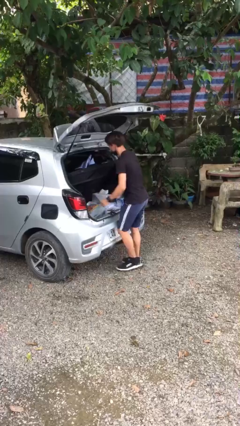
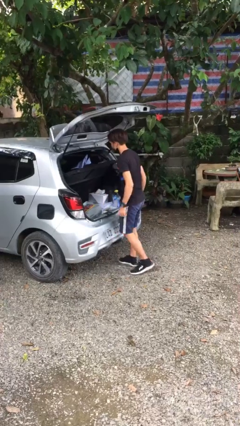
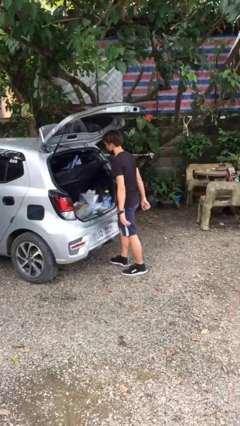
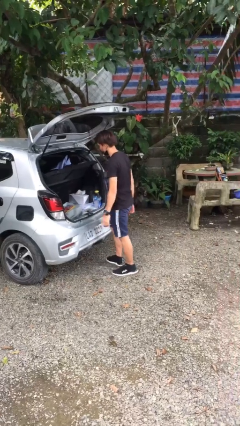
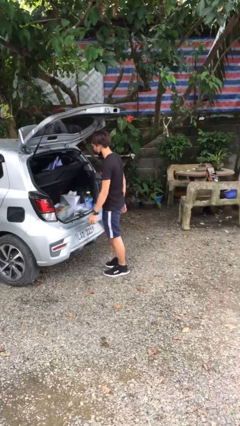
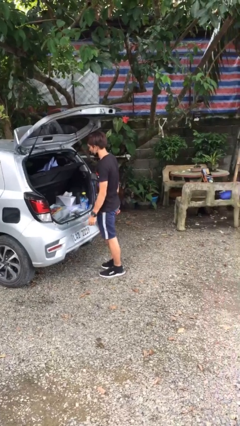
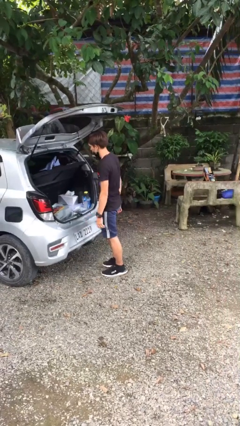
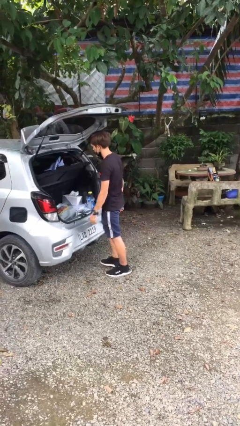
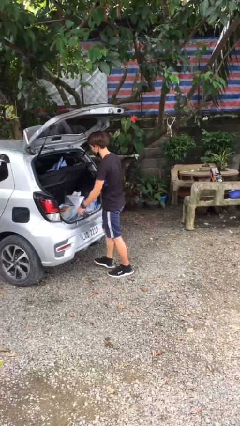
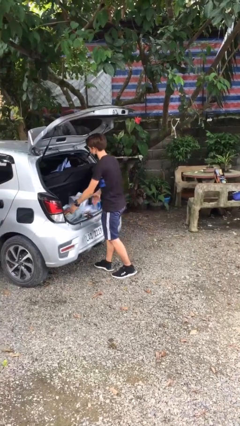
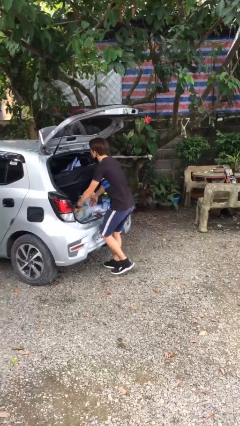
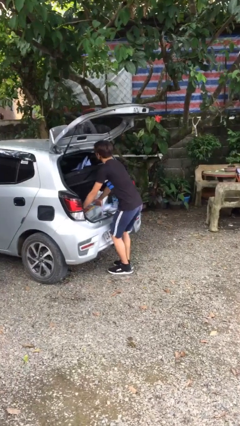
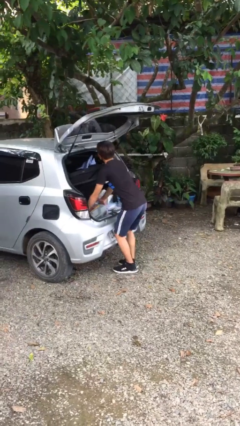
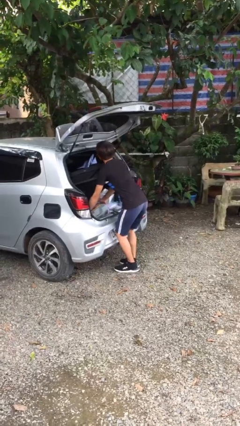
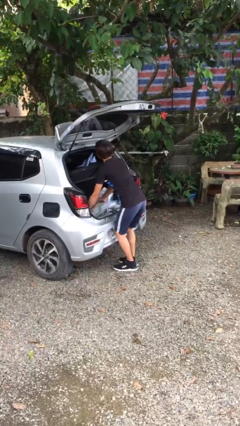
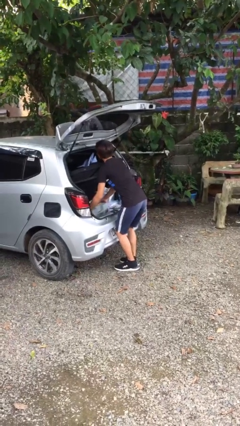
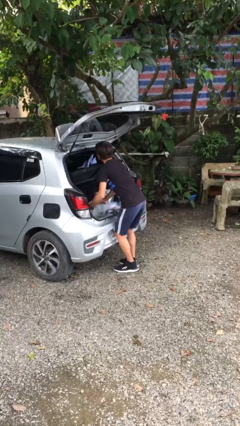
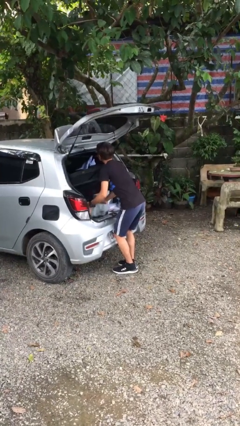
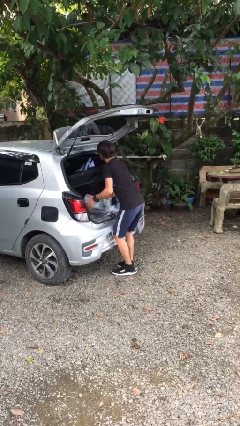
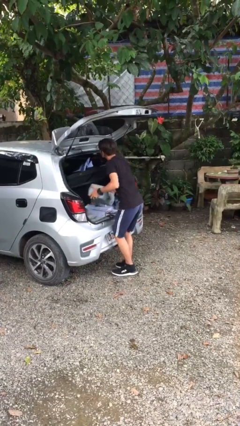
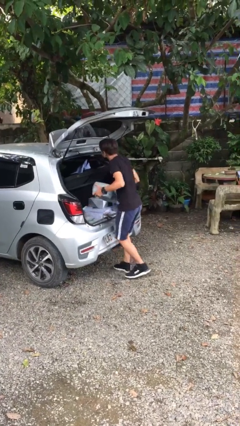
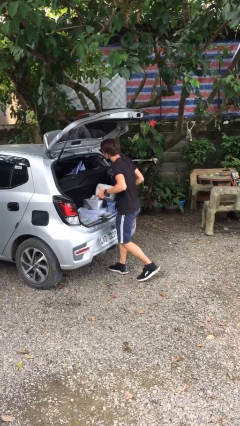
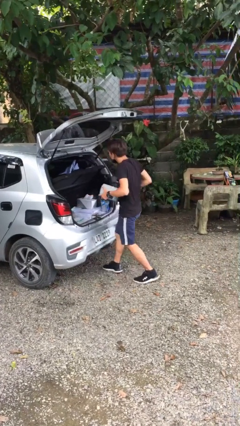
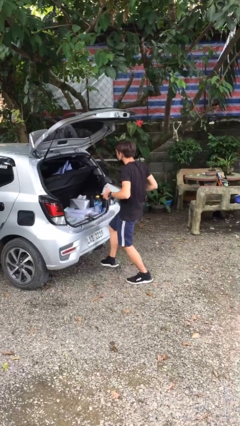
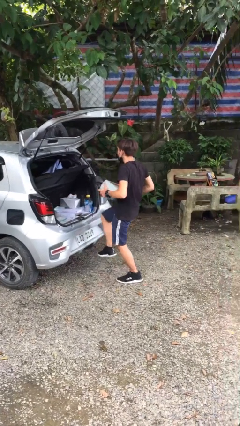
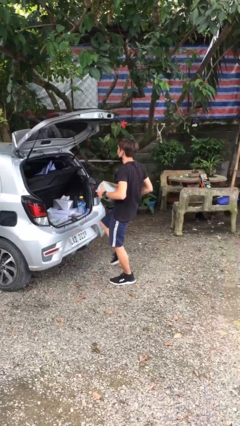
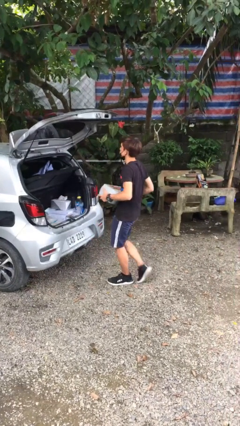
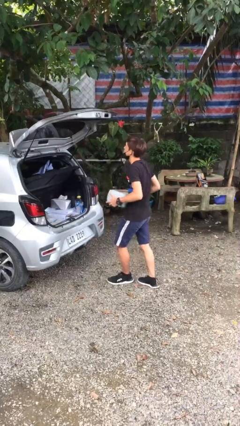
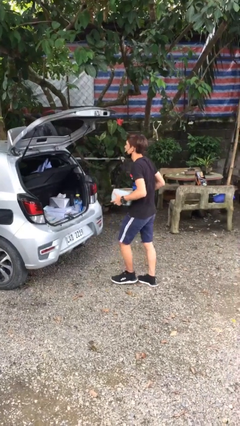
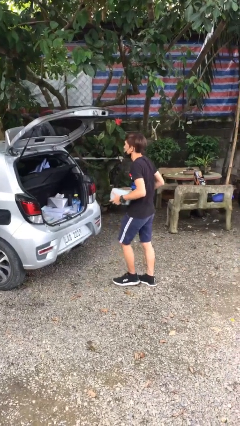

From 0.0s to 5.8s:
person unloads car

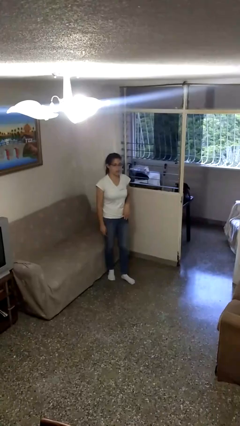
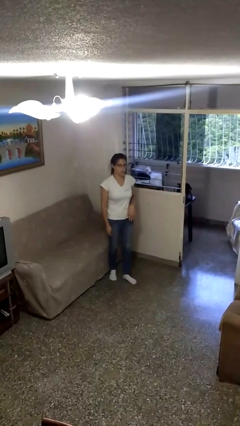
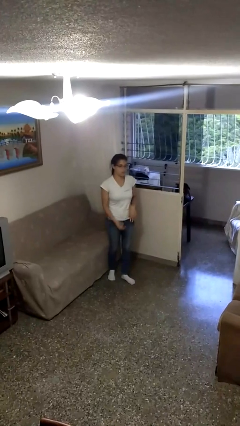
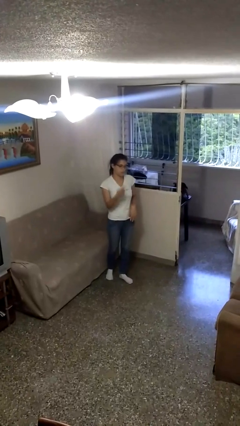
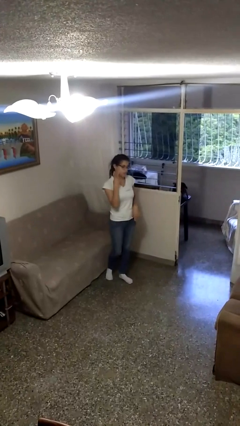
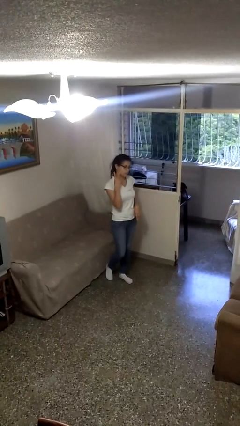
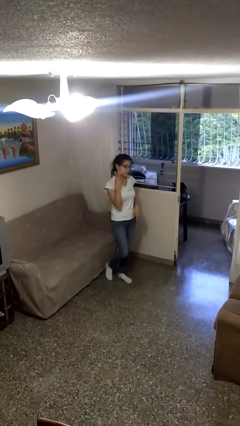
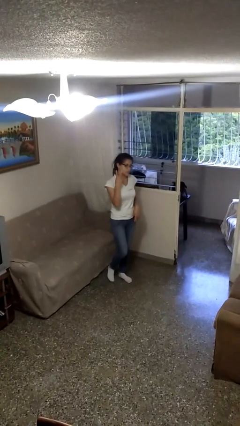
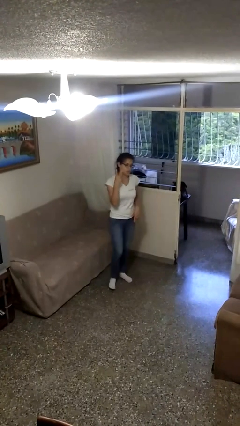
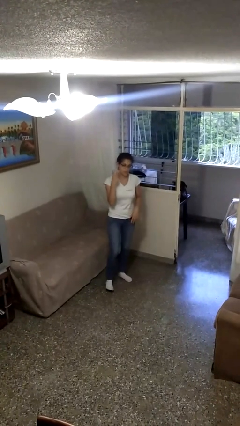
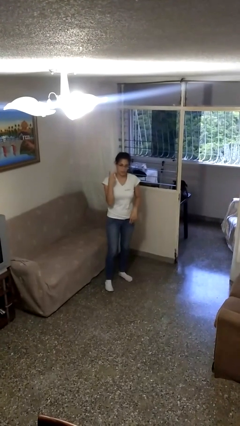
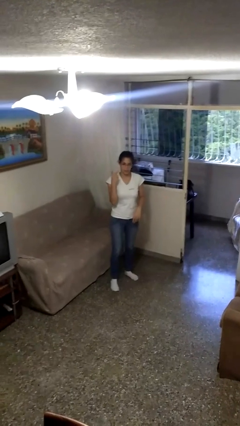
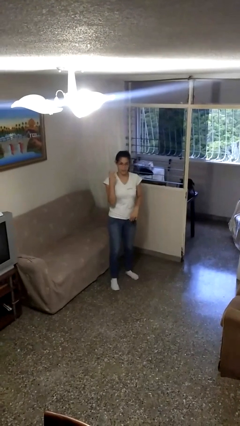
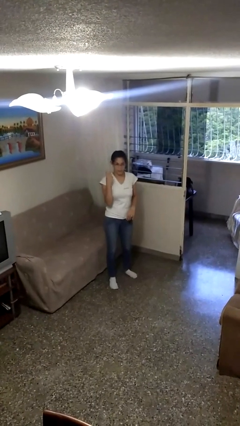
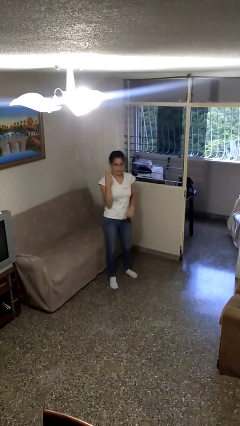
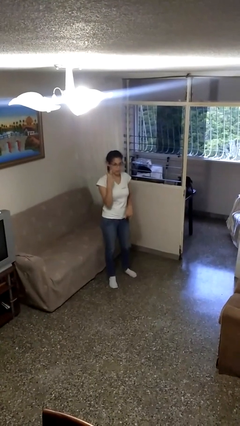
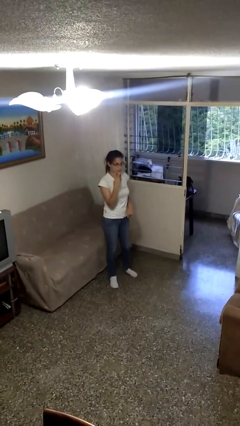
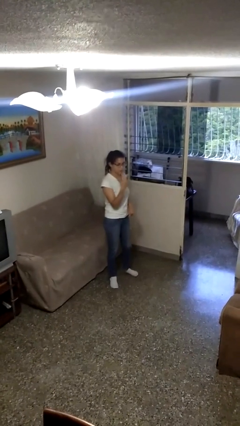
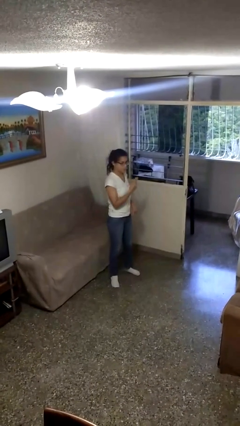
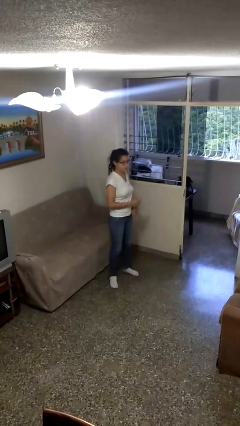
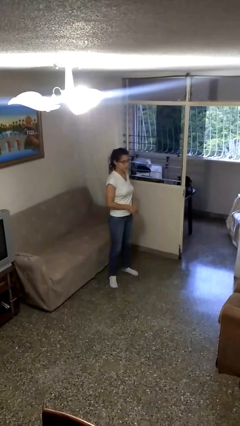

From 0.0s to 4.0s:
person gestures peace

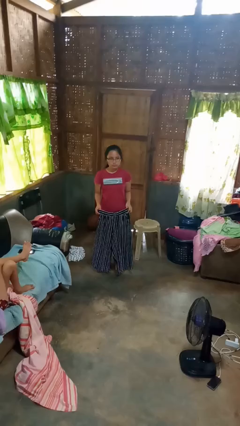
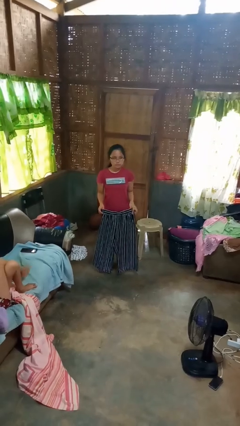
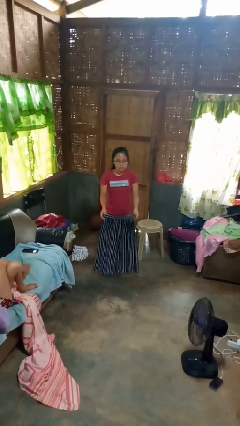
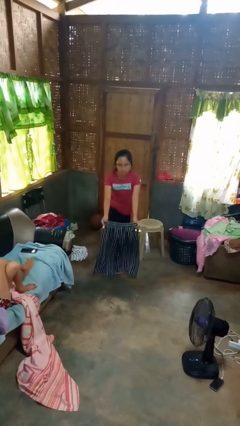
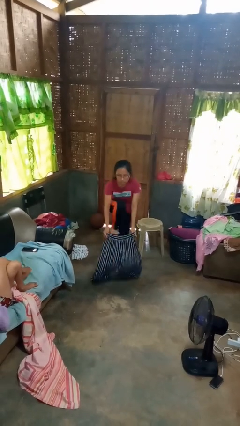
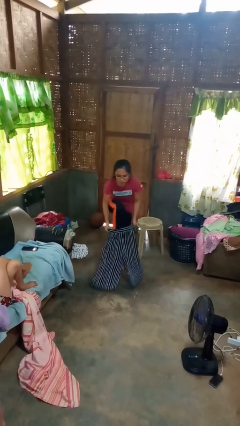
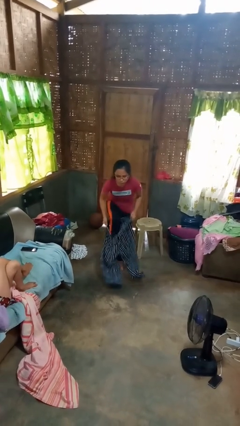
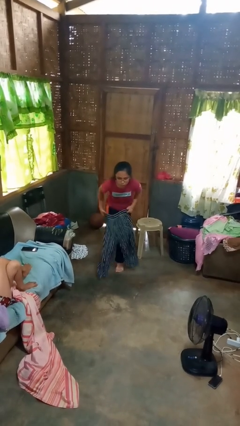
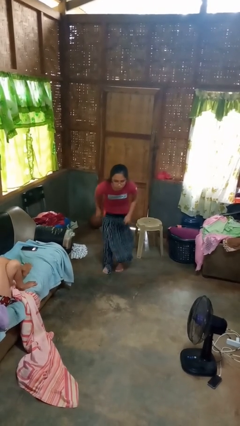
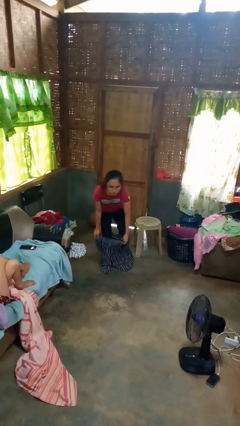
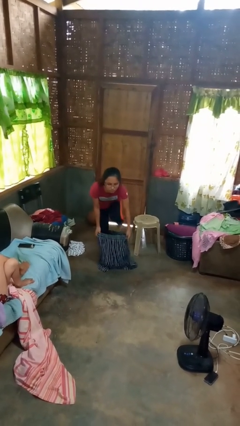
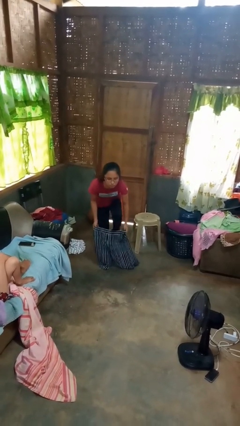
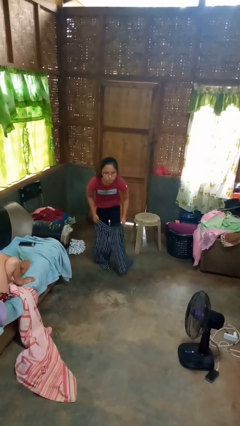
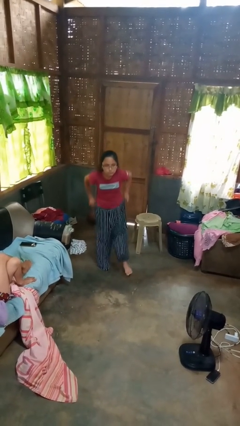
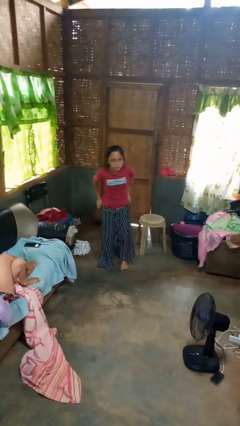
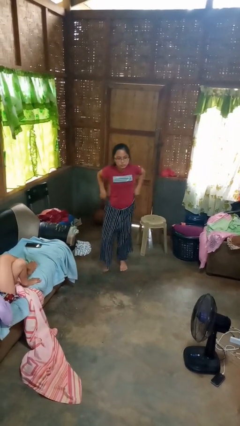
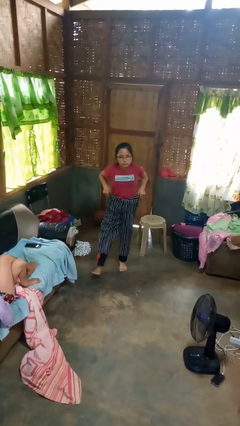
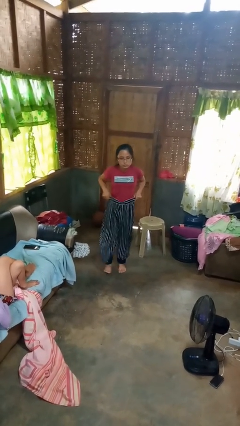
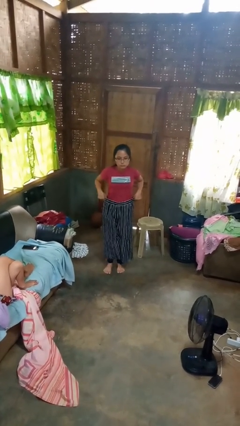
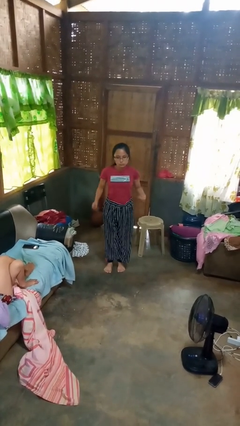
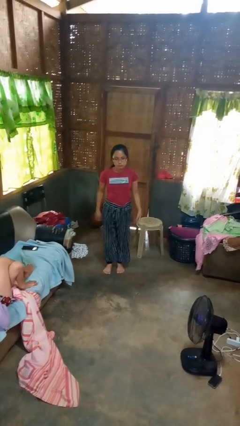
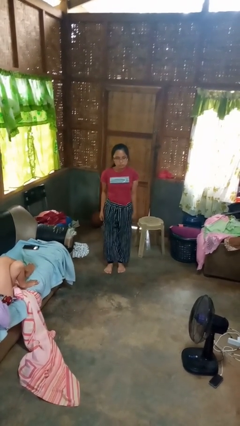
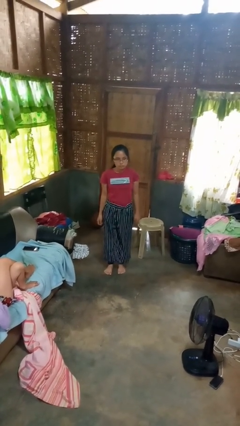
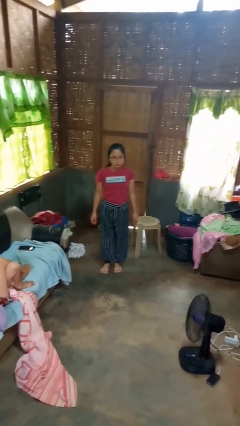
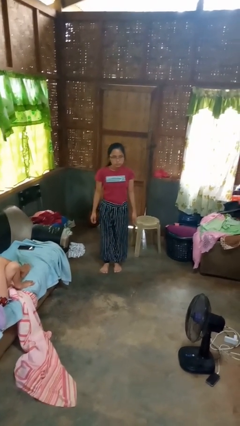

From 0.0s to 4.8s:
person puts on pants

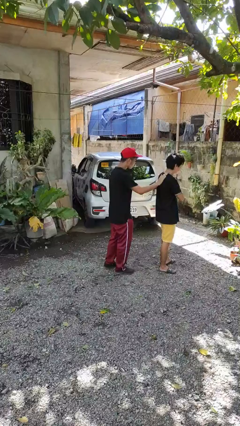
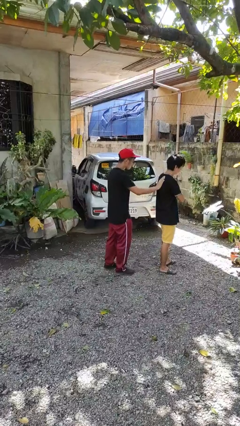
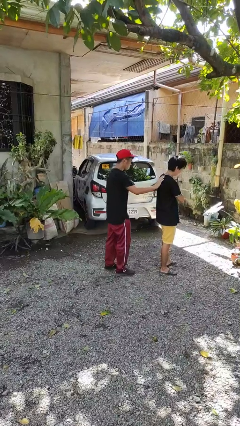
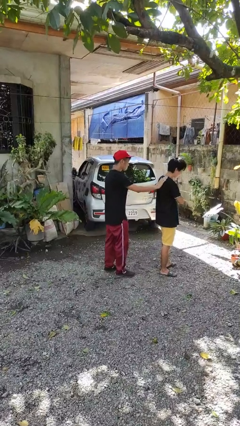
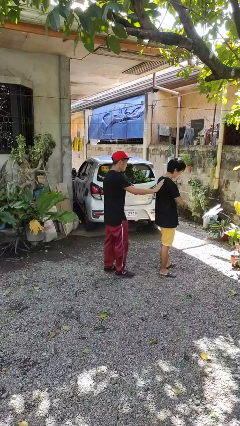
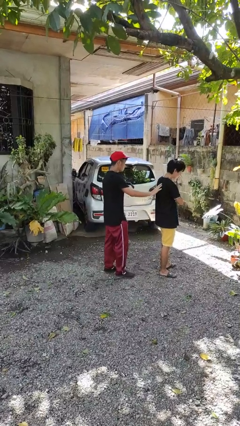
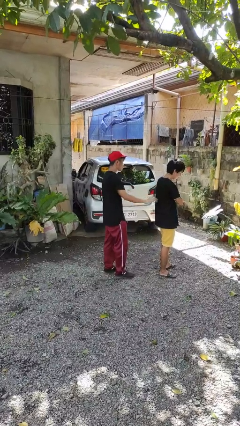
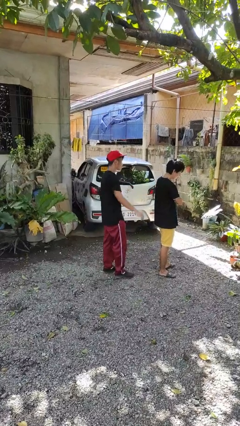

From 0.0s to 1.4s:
person touches back of person

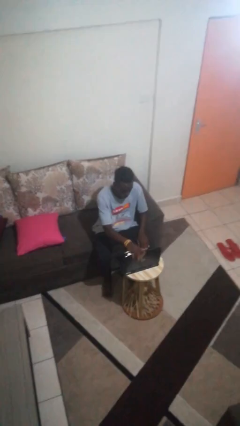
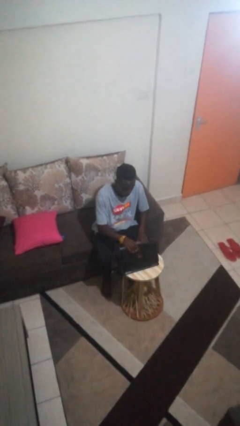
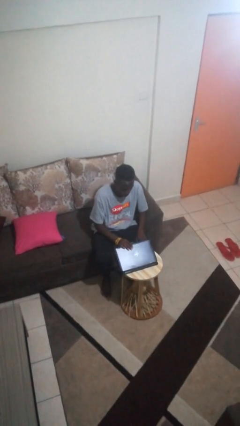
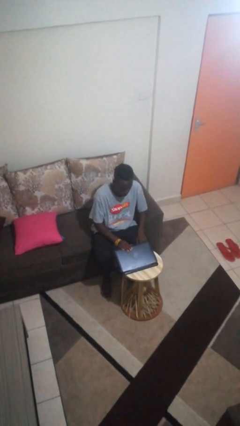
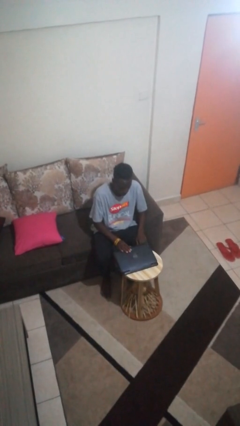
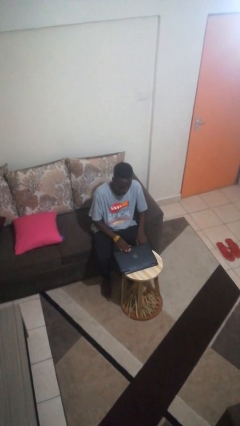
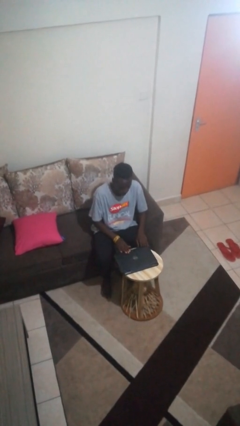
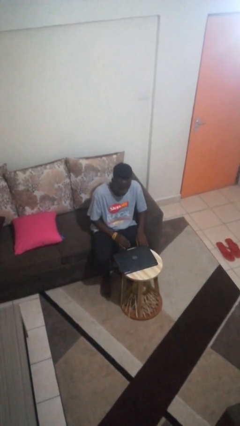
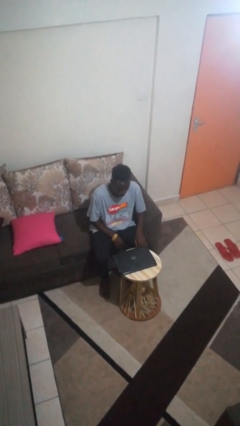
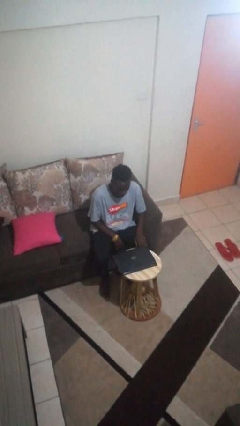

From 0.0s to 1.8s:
person closes laptop
